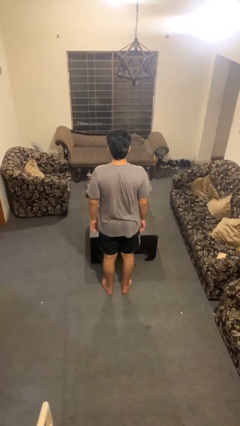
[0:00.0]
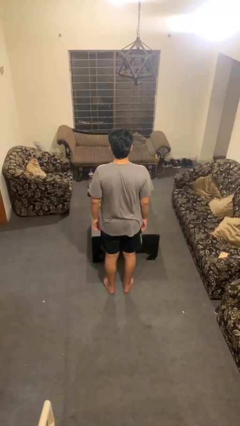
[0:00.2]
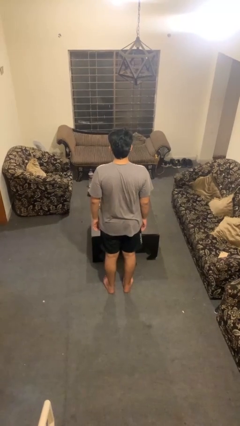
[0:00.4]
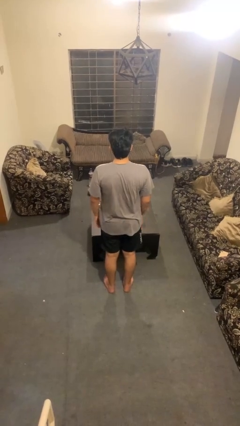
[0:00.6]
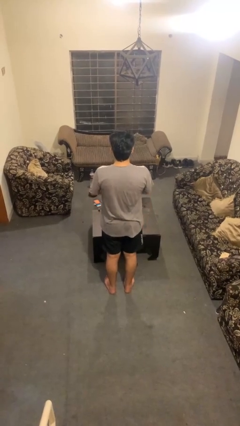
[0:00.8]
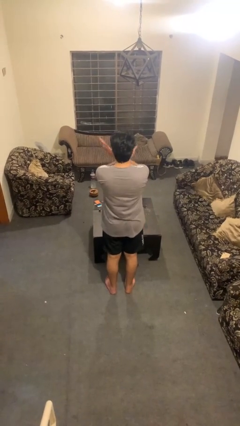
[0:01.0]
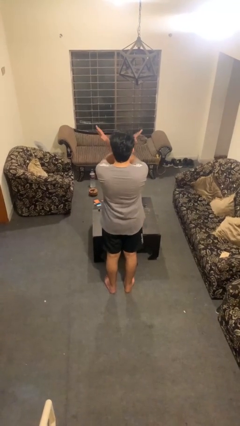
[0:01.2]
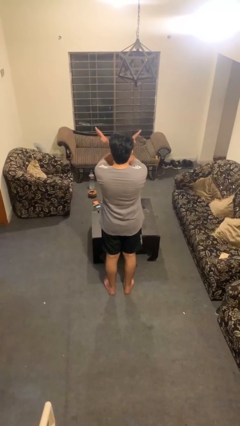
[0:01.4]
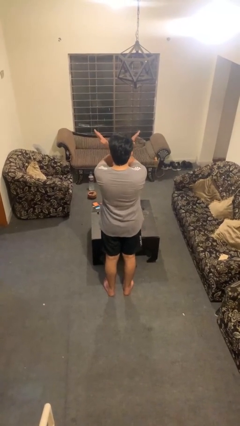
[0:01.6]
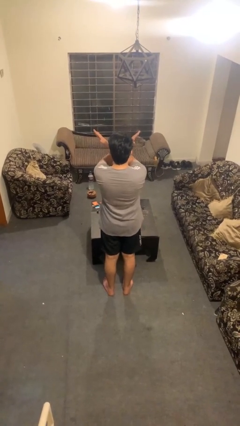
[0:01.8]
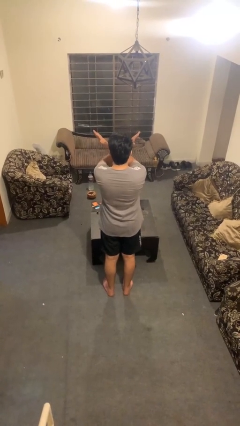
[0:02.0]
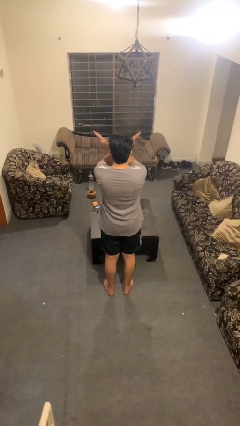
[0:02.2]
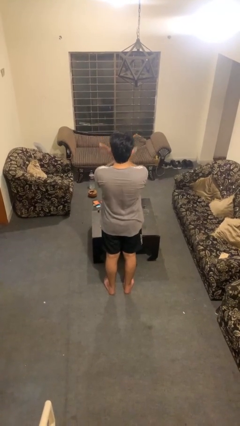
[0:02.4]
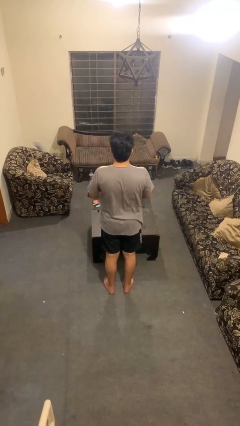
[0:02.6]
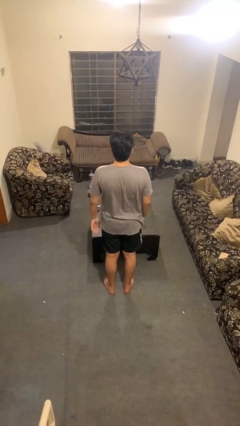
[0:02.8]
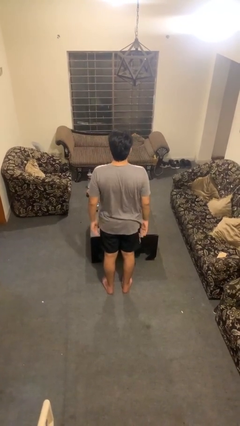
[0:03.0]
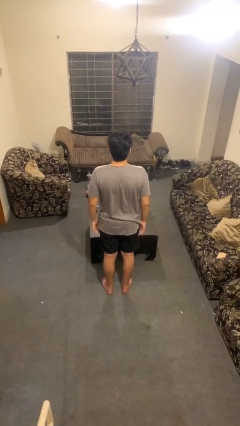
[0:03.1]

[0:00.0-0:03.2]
person gestures arms x

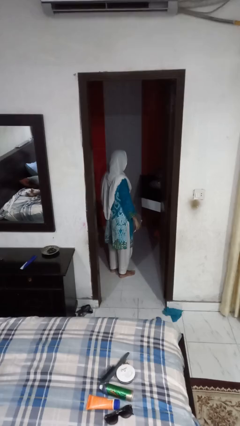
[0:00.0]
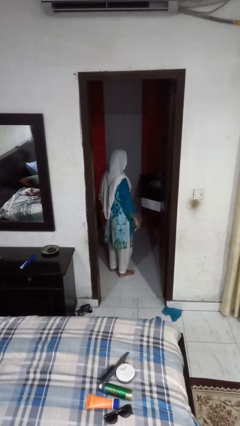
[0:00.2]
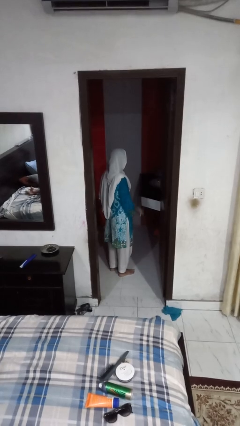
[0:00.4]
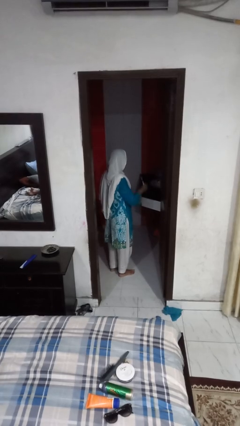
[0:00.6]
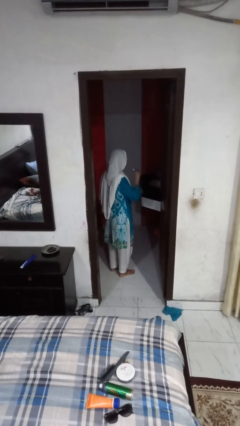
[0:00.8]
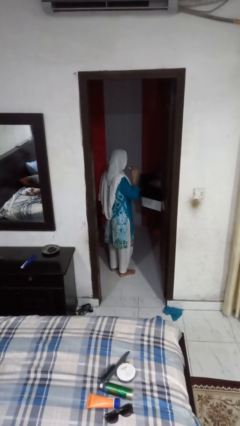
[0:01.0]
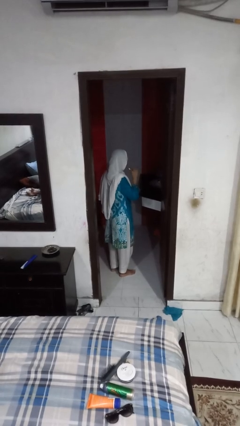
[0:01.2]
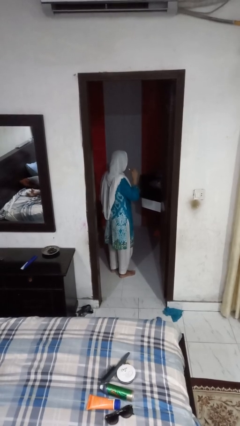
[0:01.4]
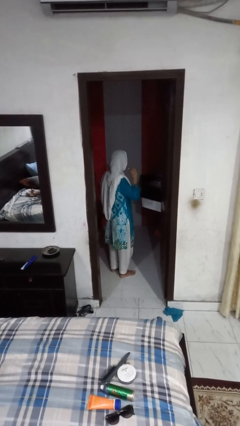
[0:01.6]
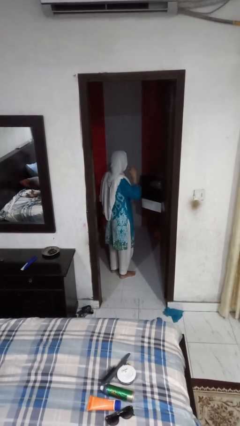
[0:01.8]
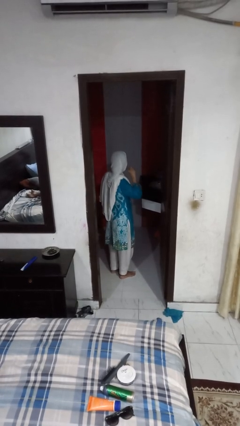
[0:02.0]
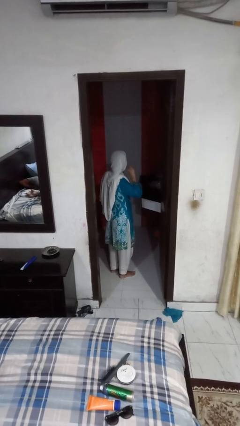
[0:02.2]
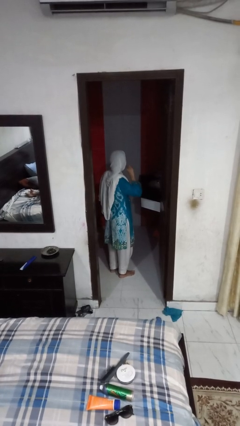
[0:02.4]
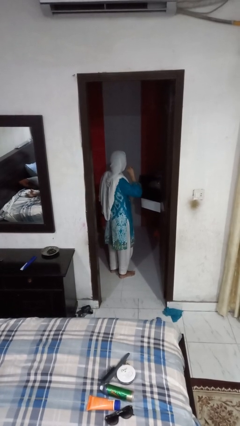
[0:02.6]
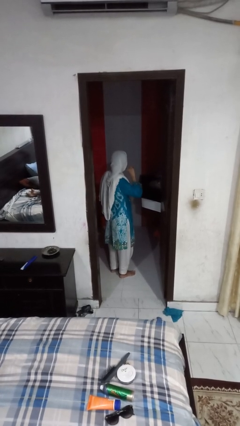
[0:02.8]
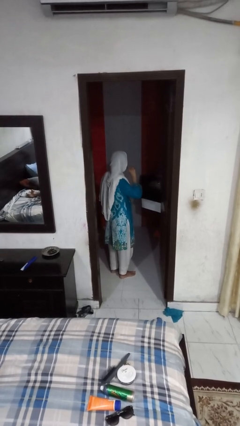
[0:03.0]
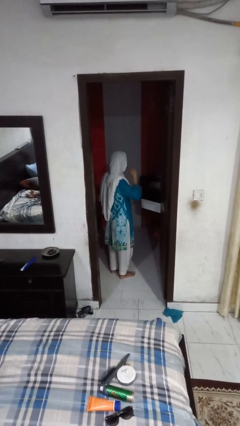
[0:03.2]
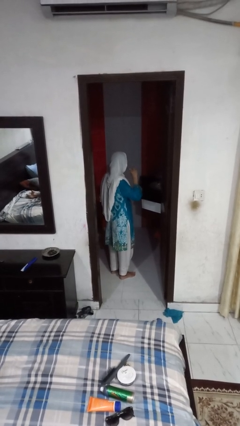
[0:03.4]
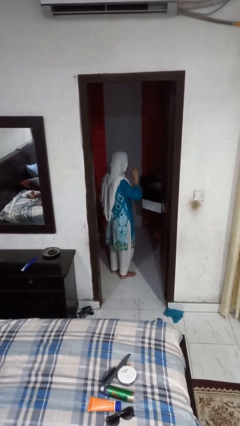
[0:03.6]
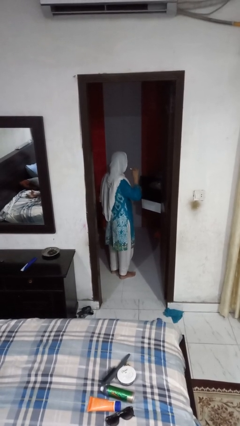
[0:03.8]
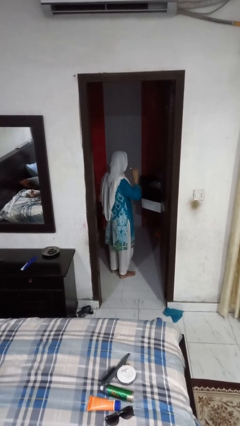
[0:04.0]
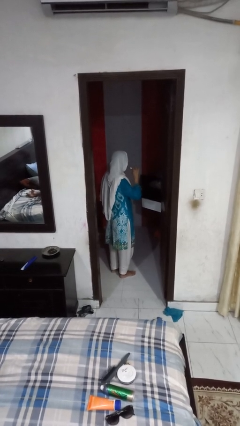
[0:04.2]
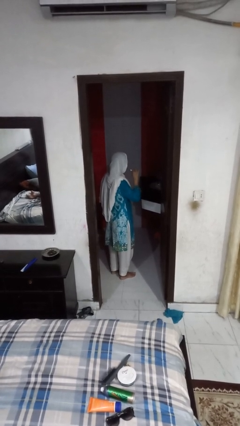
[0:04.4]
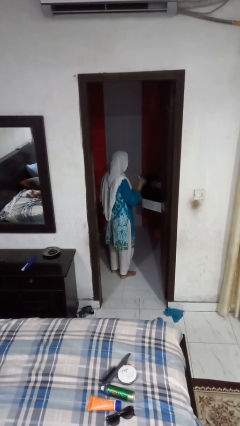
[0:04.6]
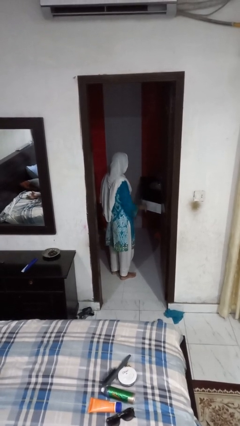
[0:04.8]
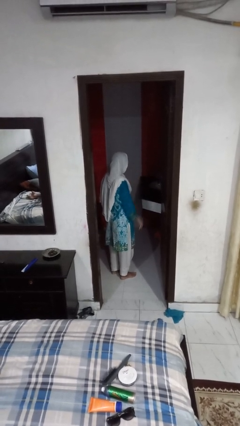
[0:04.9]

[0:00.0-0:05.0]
person brushes teeth

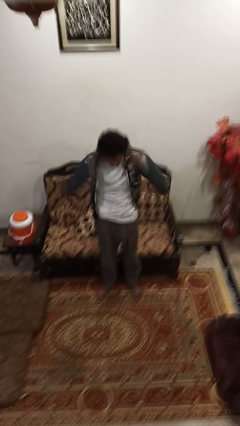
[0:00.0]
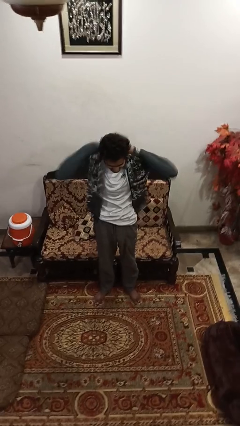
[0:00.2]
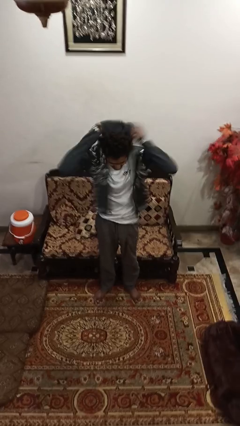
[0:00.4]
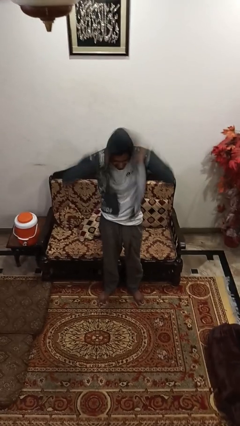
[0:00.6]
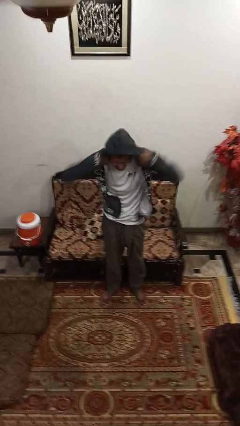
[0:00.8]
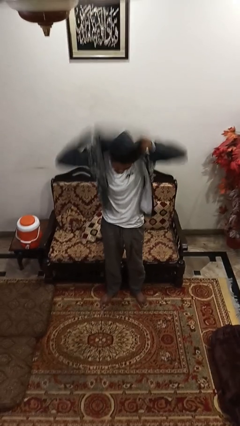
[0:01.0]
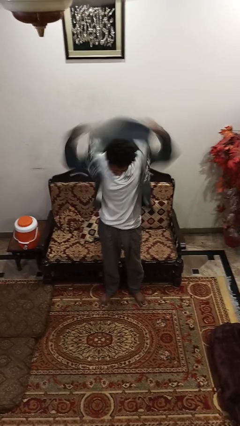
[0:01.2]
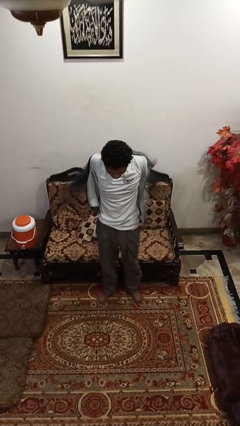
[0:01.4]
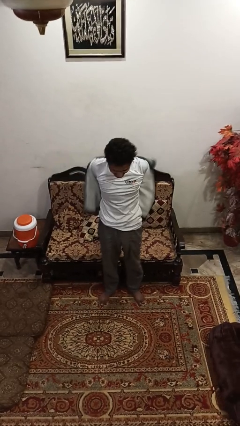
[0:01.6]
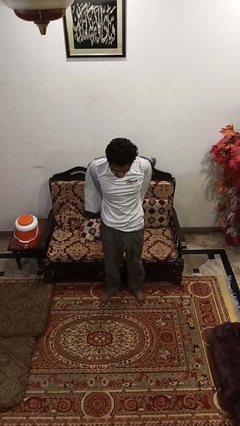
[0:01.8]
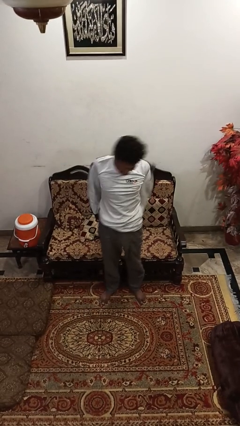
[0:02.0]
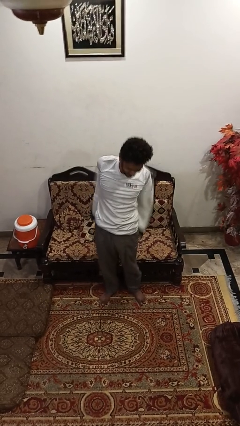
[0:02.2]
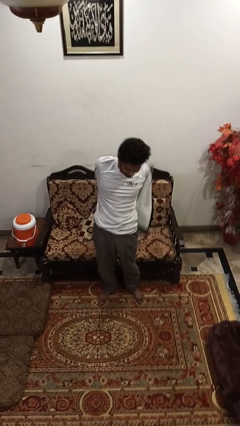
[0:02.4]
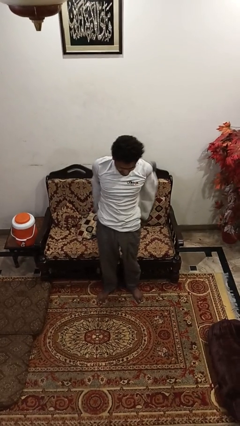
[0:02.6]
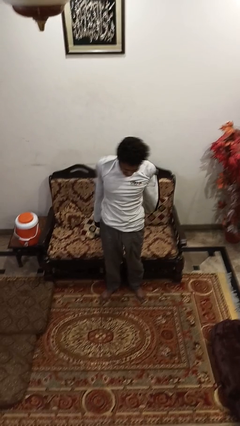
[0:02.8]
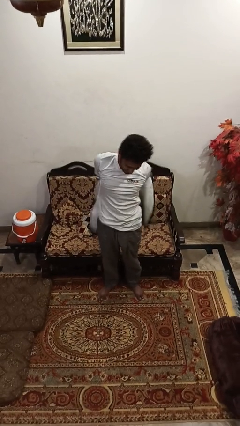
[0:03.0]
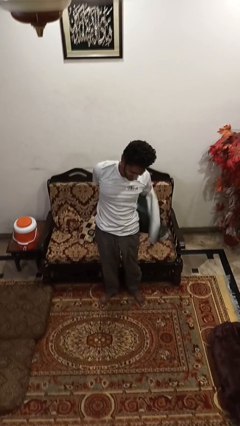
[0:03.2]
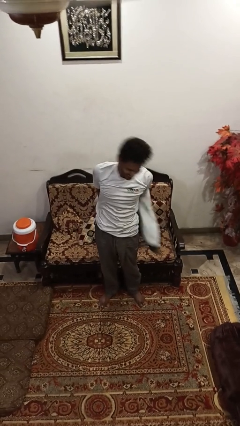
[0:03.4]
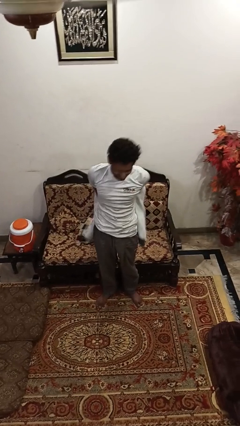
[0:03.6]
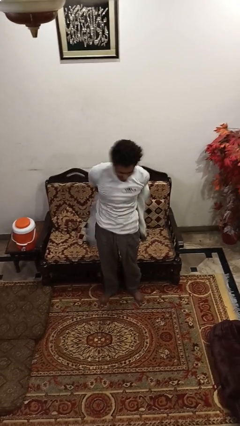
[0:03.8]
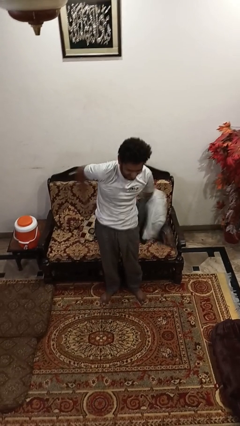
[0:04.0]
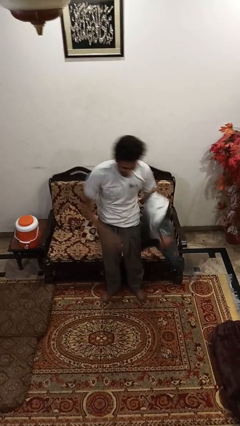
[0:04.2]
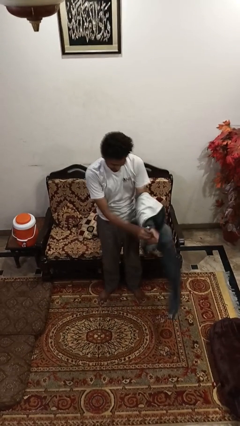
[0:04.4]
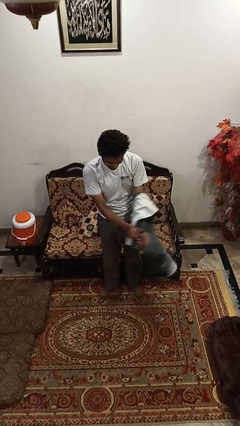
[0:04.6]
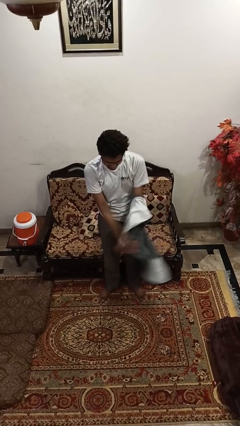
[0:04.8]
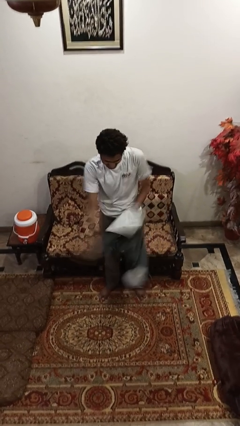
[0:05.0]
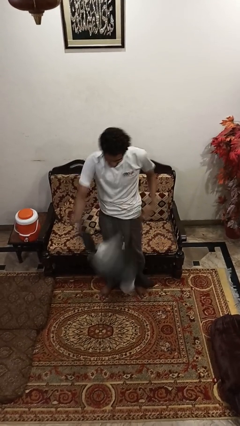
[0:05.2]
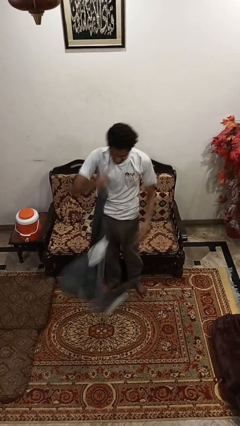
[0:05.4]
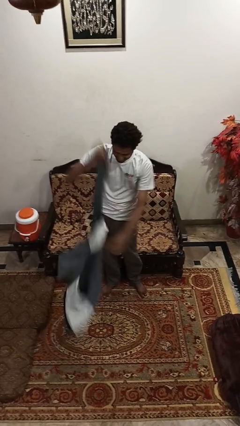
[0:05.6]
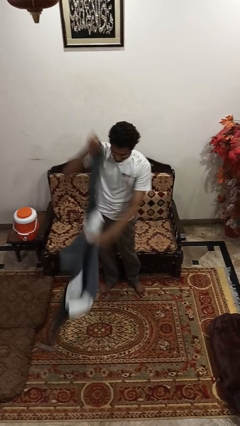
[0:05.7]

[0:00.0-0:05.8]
person takes off hoodie

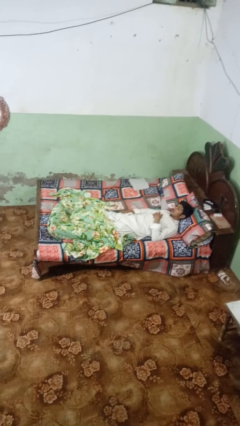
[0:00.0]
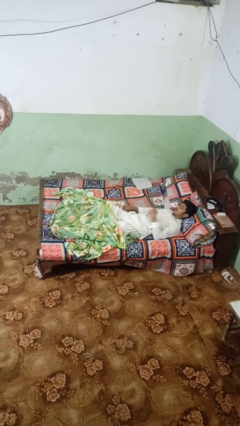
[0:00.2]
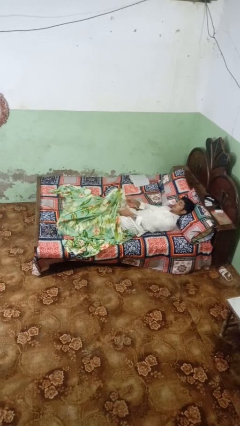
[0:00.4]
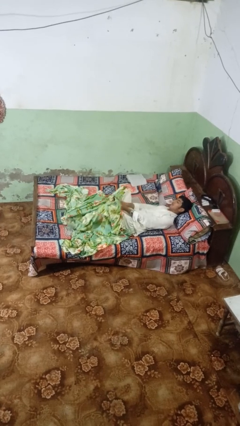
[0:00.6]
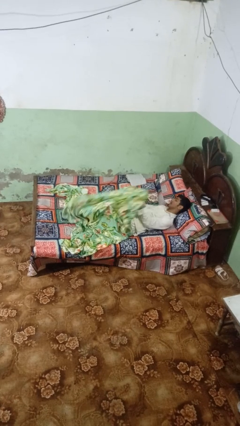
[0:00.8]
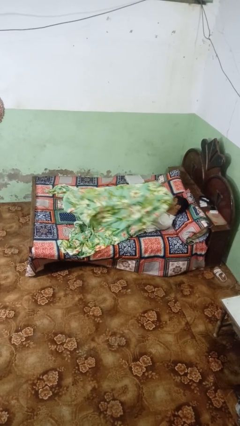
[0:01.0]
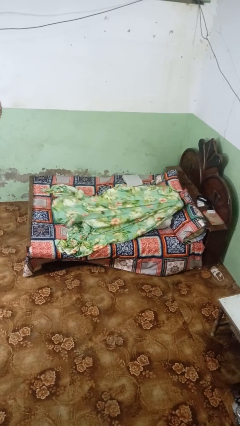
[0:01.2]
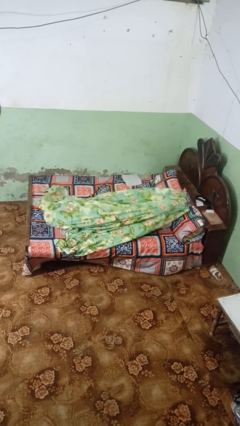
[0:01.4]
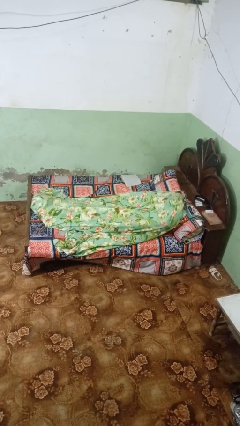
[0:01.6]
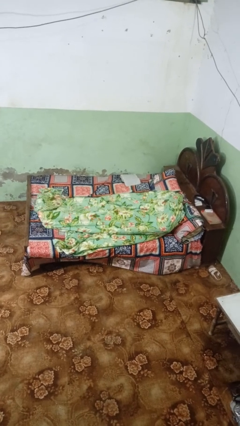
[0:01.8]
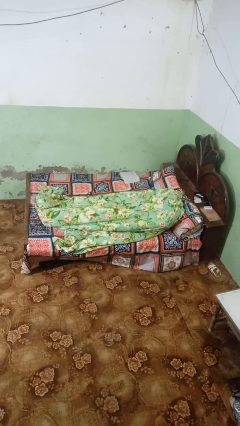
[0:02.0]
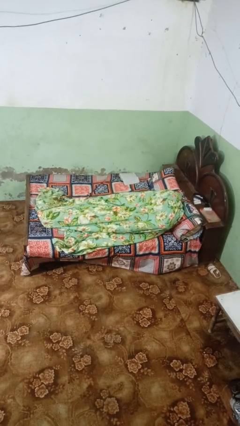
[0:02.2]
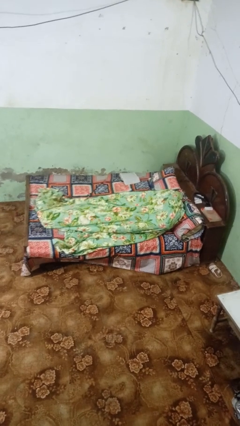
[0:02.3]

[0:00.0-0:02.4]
person covers with bedsheets

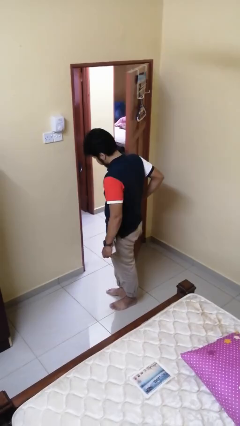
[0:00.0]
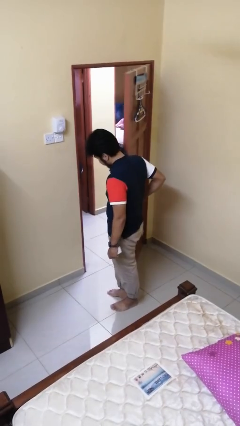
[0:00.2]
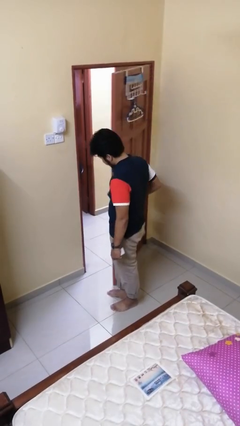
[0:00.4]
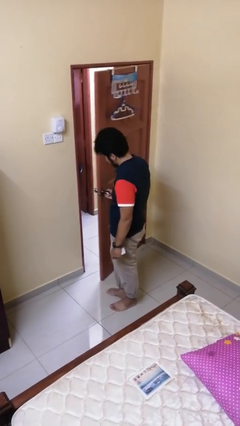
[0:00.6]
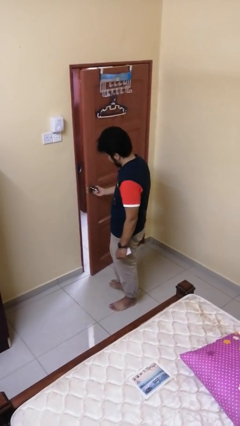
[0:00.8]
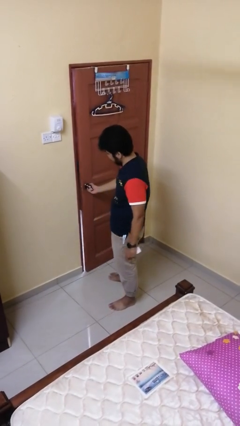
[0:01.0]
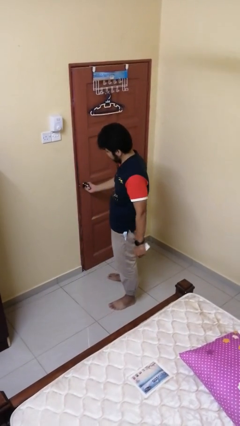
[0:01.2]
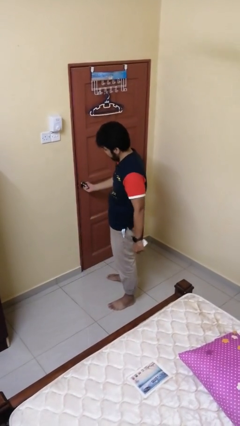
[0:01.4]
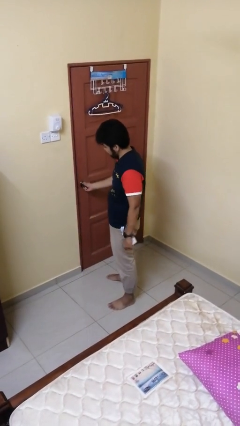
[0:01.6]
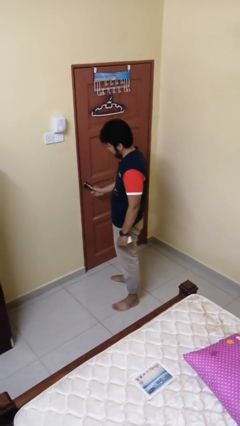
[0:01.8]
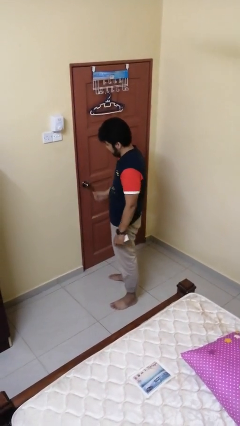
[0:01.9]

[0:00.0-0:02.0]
person closes facility door
